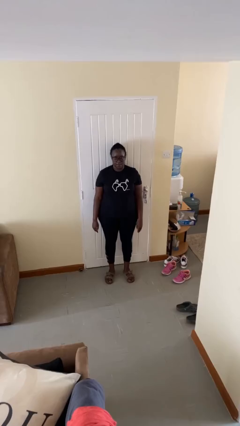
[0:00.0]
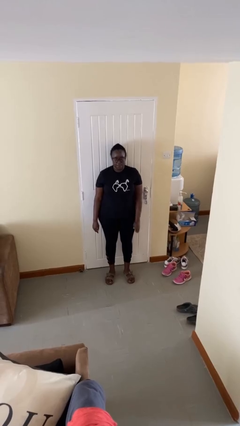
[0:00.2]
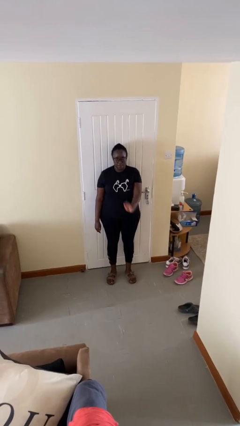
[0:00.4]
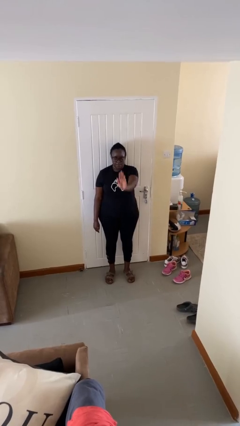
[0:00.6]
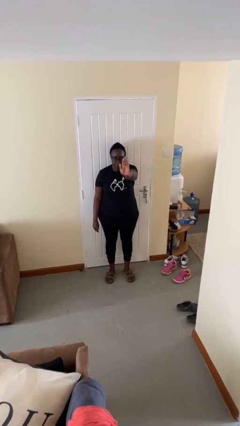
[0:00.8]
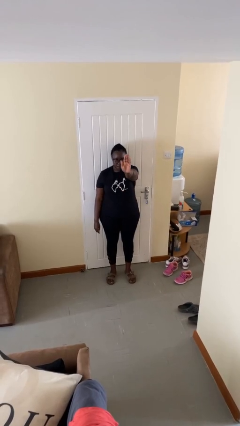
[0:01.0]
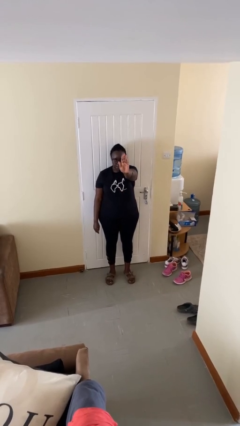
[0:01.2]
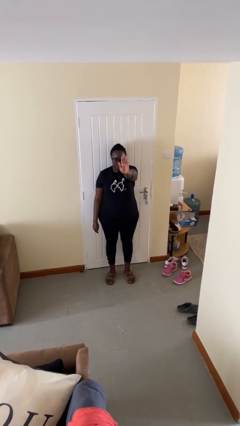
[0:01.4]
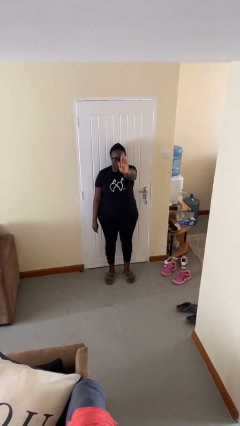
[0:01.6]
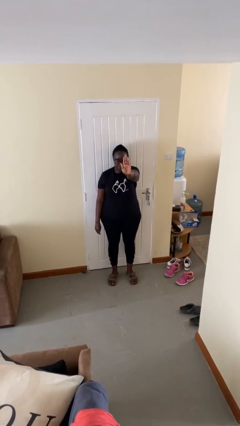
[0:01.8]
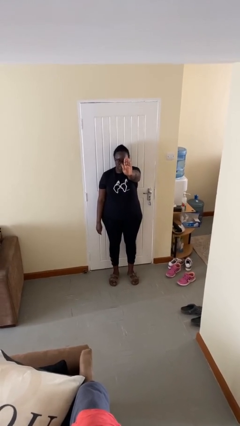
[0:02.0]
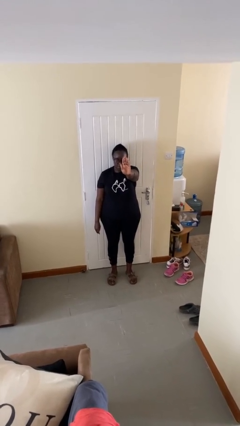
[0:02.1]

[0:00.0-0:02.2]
person gestures stop

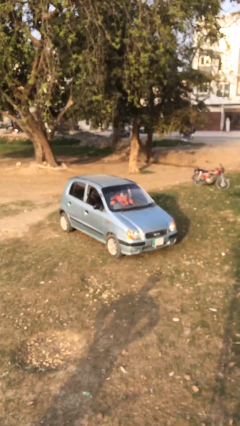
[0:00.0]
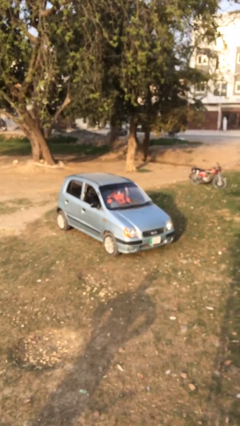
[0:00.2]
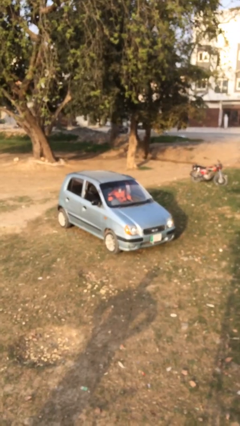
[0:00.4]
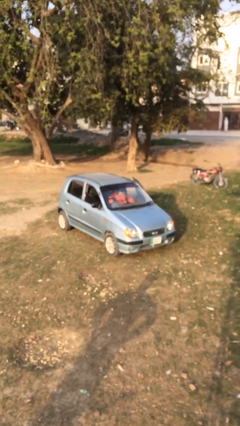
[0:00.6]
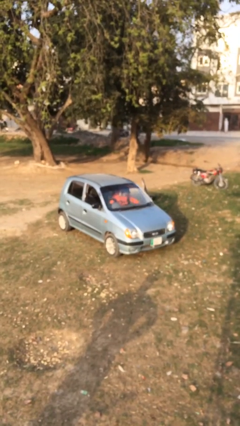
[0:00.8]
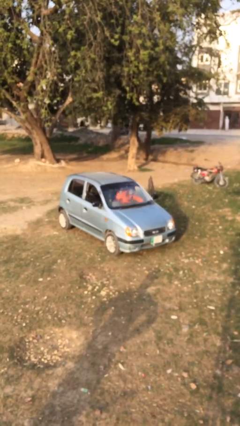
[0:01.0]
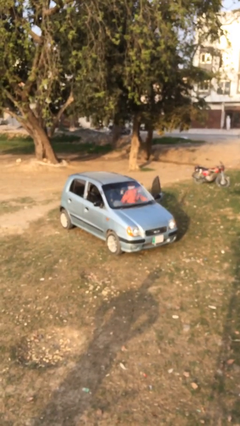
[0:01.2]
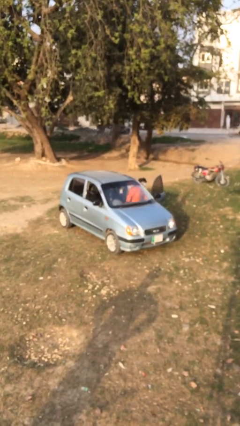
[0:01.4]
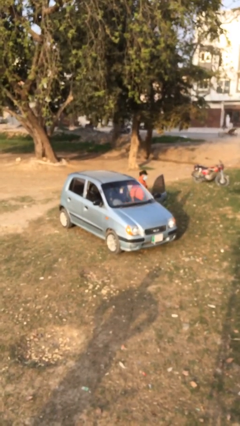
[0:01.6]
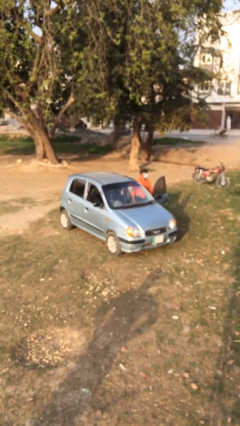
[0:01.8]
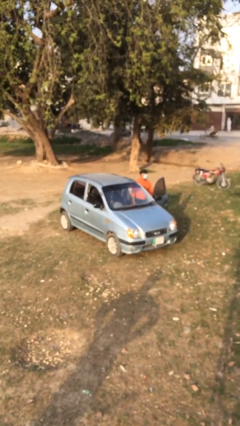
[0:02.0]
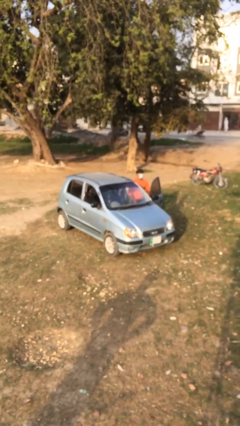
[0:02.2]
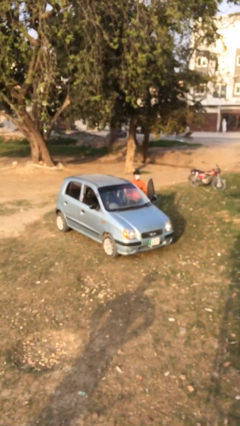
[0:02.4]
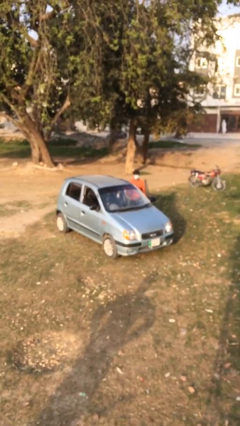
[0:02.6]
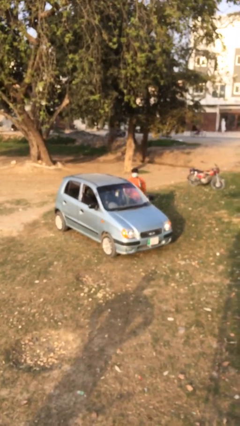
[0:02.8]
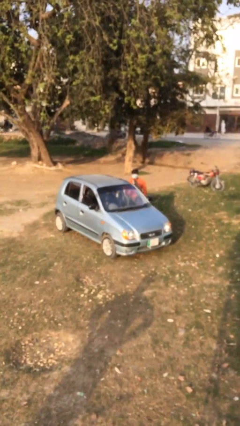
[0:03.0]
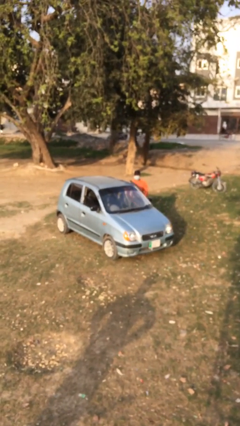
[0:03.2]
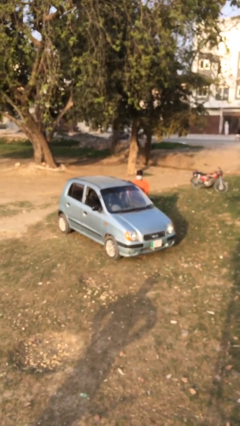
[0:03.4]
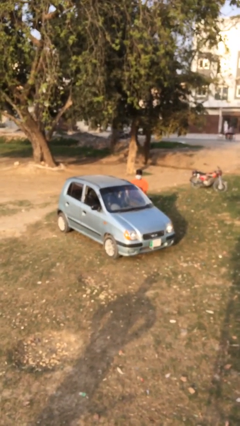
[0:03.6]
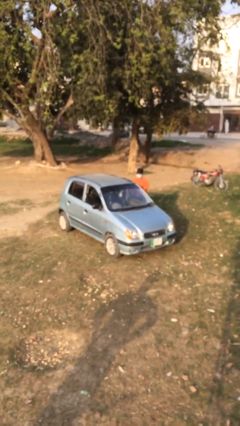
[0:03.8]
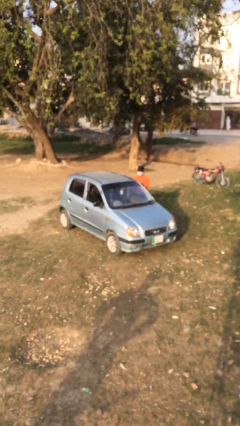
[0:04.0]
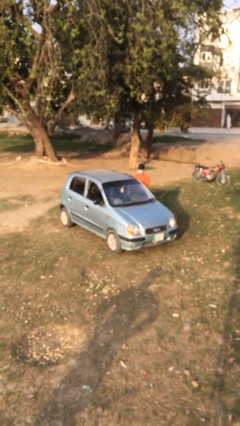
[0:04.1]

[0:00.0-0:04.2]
car drops off person

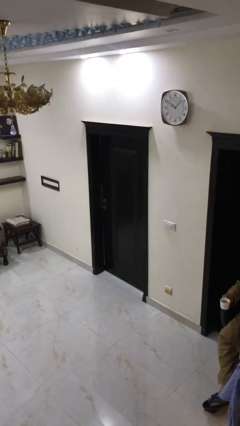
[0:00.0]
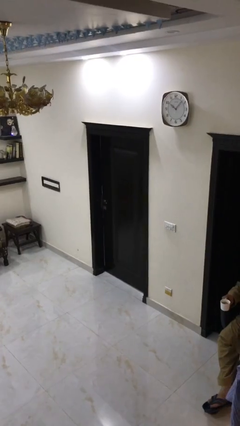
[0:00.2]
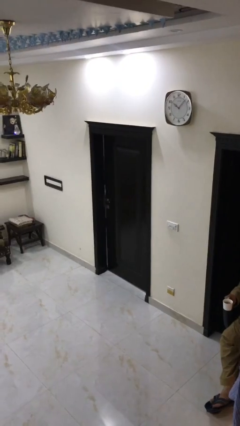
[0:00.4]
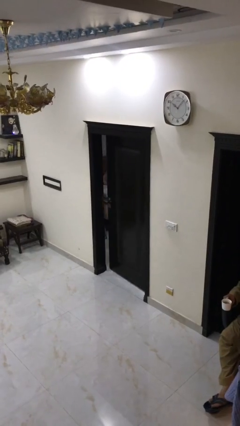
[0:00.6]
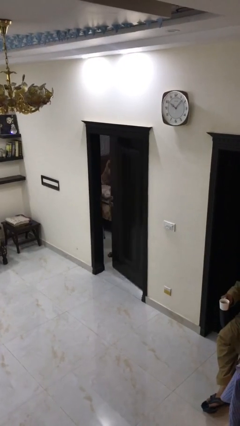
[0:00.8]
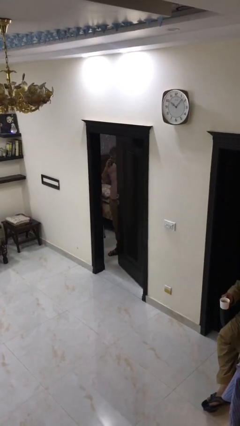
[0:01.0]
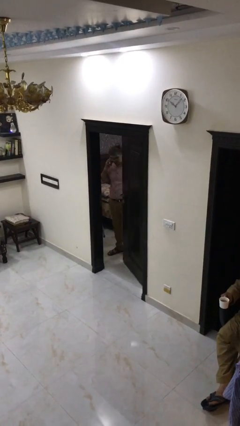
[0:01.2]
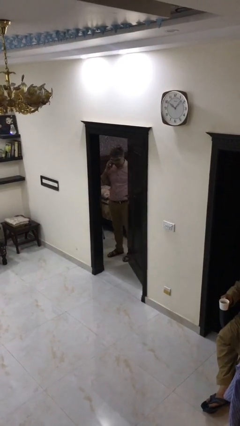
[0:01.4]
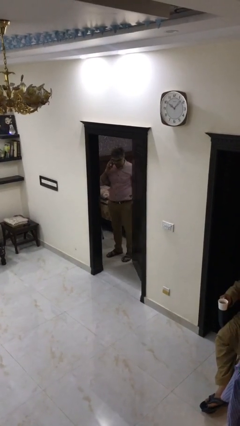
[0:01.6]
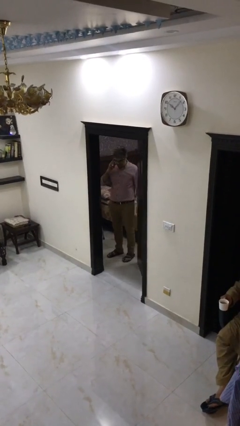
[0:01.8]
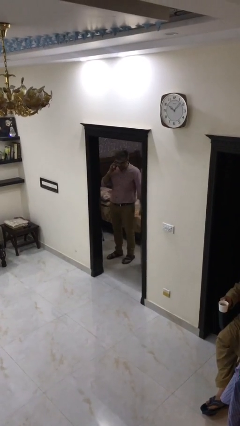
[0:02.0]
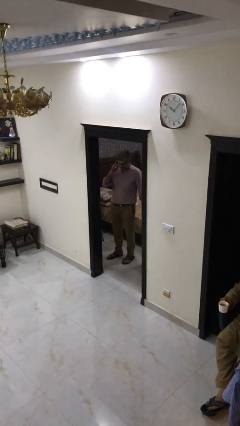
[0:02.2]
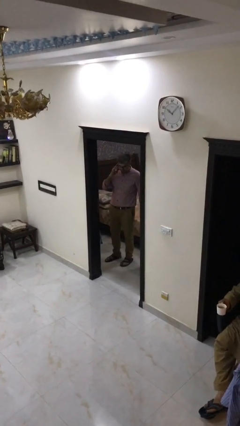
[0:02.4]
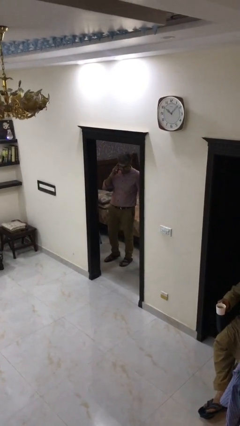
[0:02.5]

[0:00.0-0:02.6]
person opens facility door

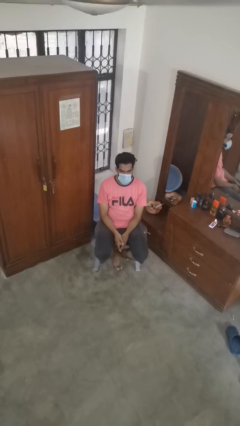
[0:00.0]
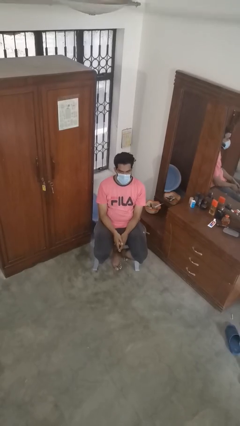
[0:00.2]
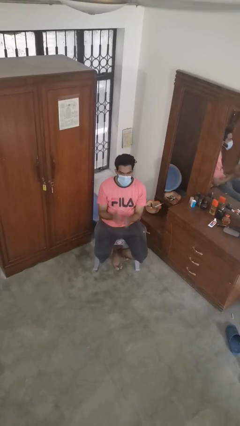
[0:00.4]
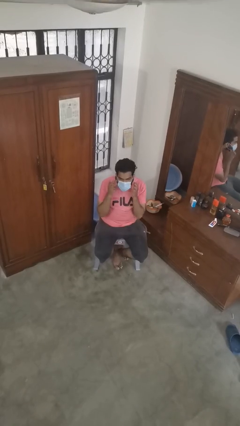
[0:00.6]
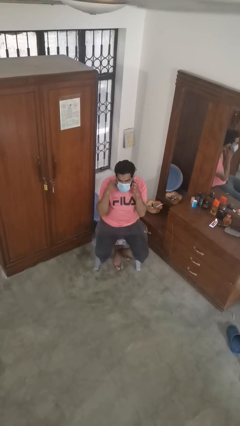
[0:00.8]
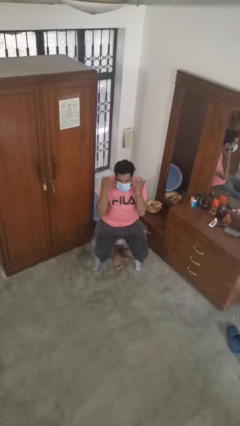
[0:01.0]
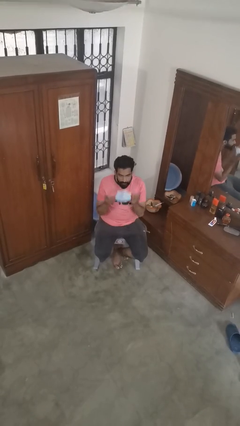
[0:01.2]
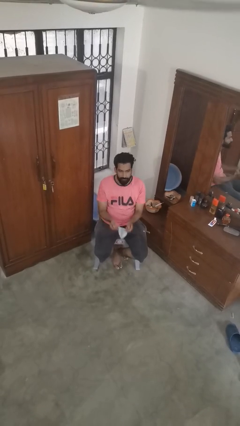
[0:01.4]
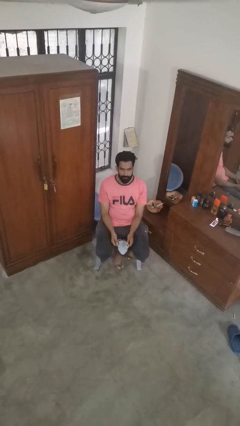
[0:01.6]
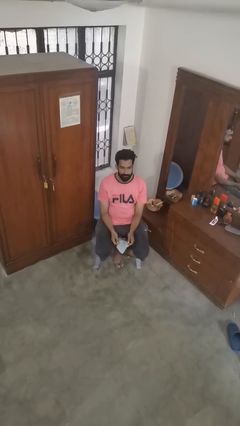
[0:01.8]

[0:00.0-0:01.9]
person takes off facemask

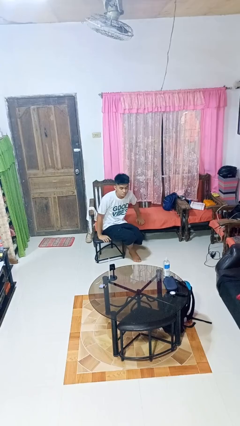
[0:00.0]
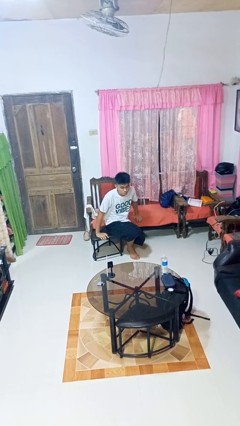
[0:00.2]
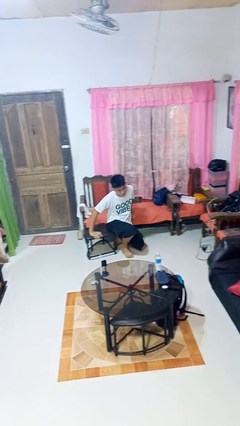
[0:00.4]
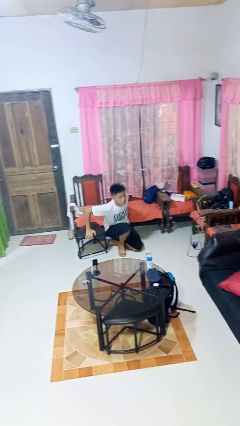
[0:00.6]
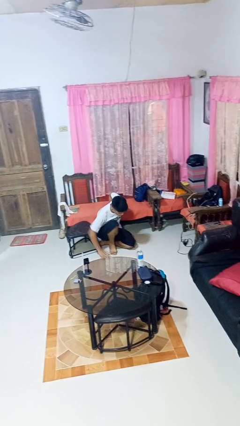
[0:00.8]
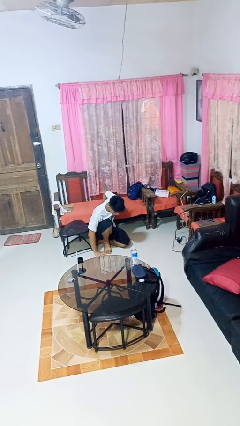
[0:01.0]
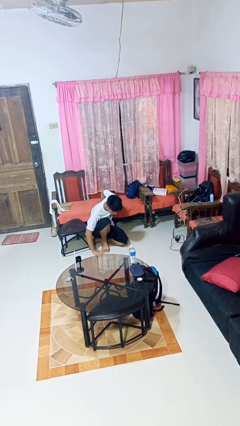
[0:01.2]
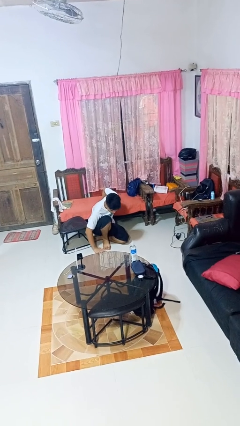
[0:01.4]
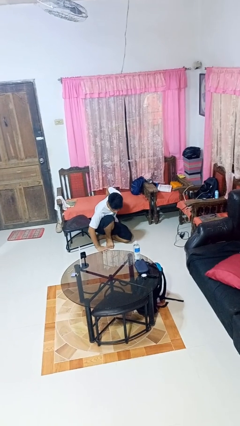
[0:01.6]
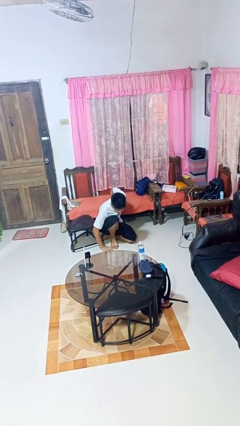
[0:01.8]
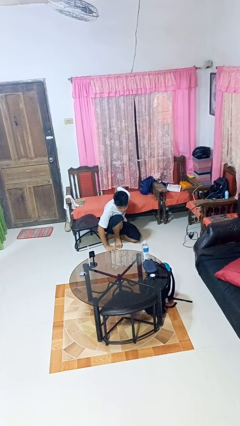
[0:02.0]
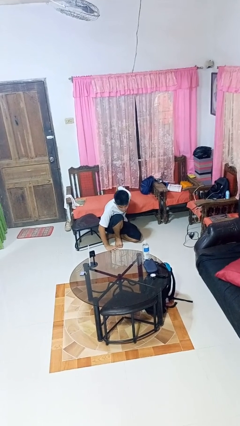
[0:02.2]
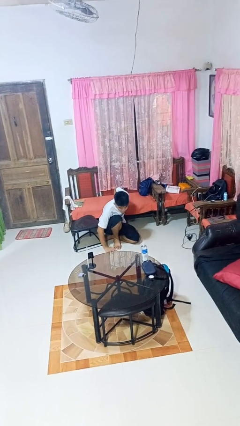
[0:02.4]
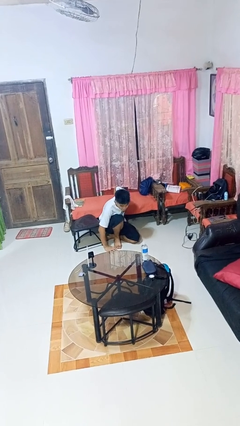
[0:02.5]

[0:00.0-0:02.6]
person falls from chair

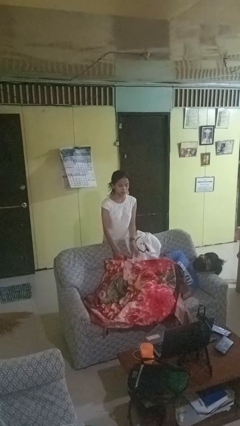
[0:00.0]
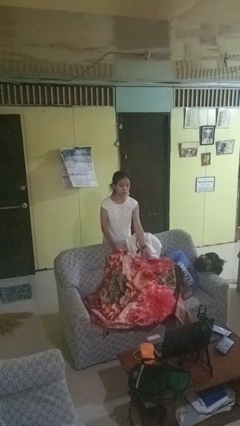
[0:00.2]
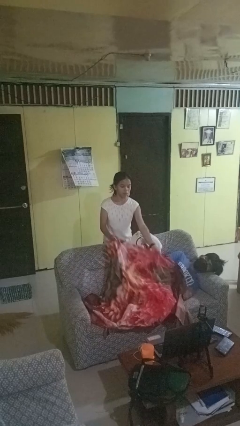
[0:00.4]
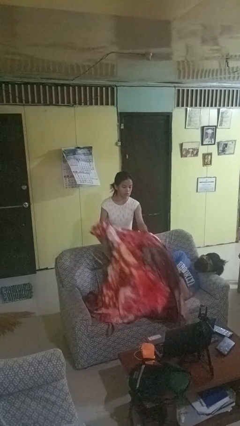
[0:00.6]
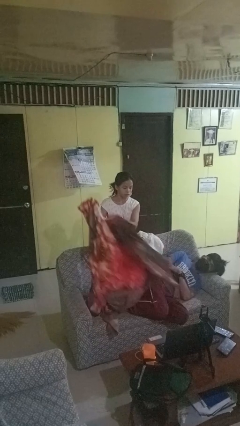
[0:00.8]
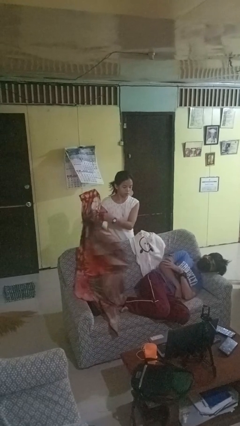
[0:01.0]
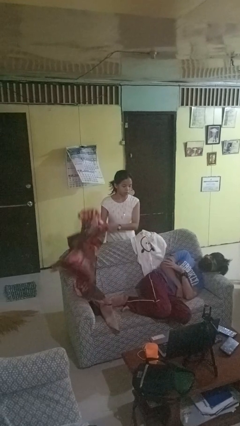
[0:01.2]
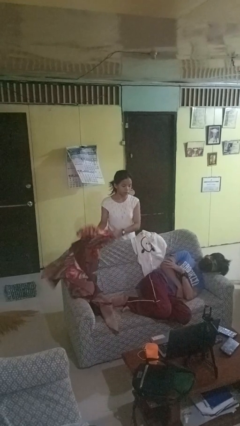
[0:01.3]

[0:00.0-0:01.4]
person uncovers friend with blanket

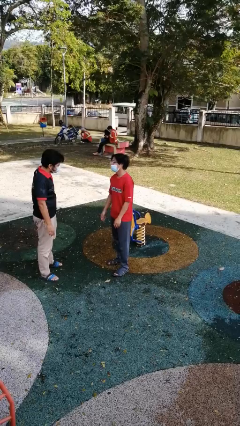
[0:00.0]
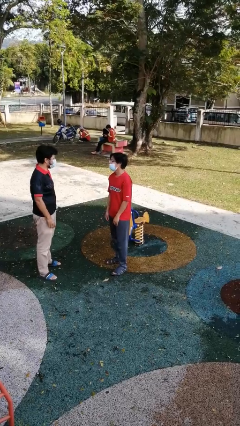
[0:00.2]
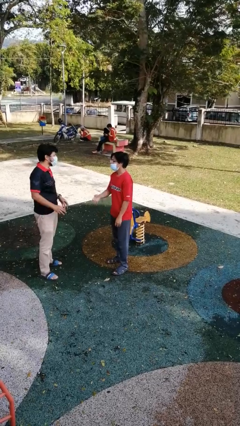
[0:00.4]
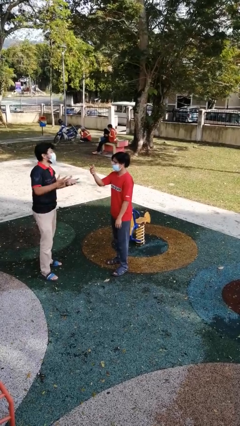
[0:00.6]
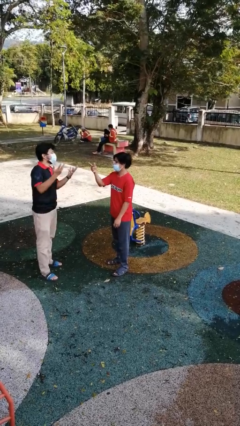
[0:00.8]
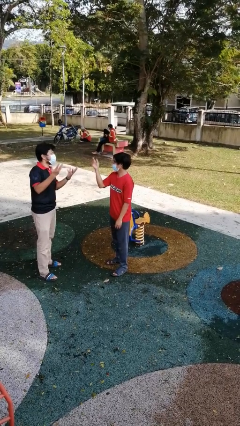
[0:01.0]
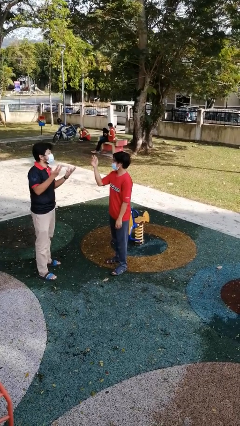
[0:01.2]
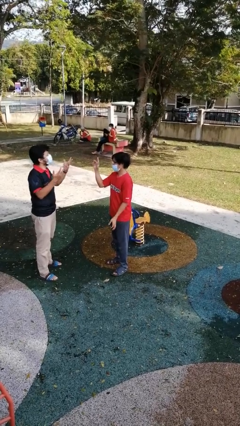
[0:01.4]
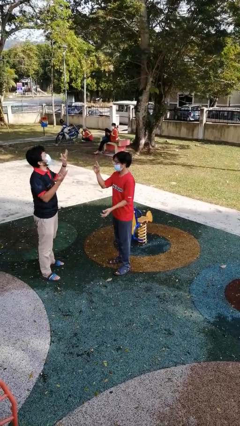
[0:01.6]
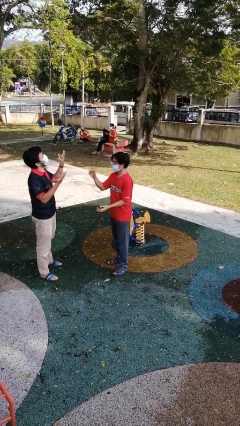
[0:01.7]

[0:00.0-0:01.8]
person talks to person
